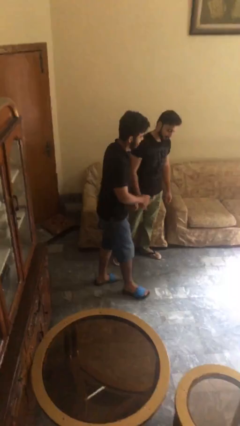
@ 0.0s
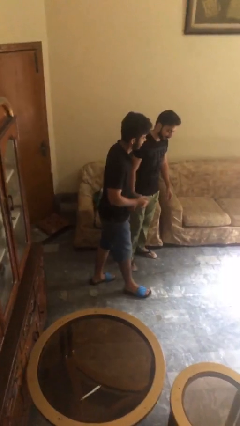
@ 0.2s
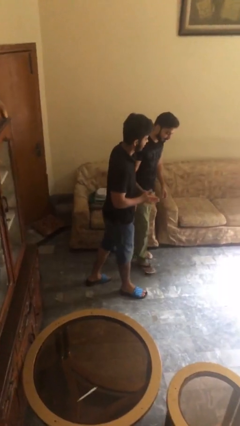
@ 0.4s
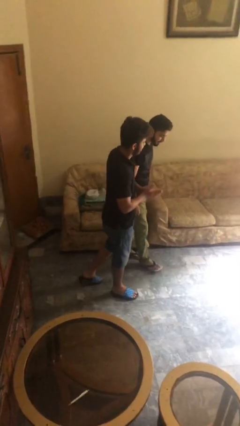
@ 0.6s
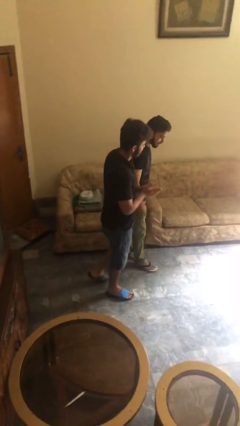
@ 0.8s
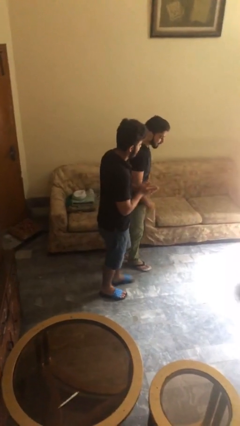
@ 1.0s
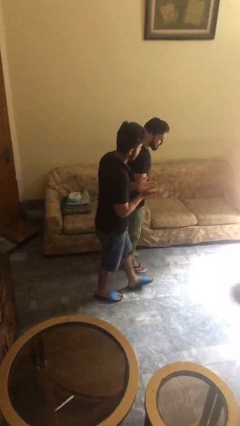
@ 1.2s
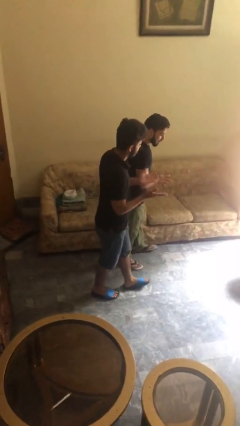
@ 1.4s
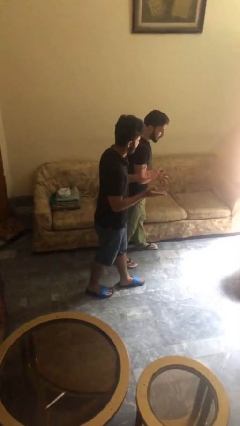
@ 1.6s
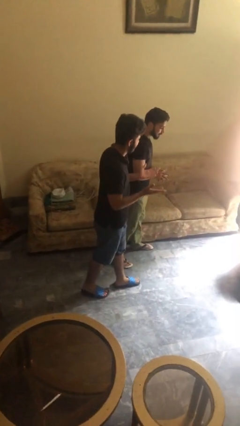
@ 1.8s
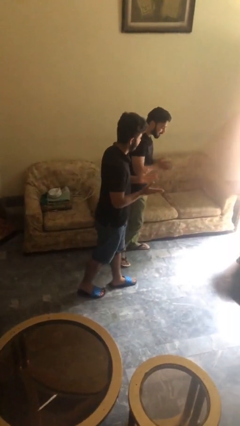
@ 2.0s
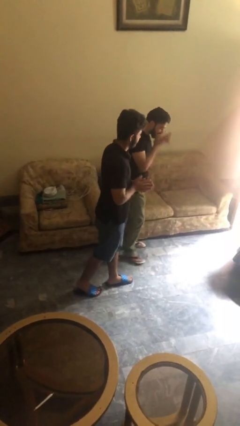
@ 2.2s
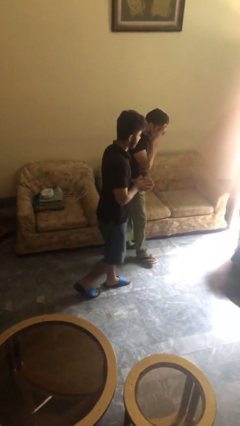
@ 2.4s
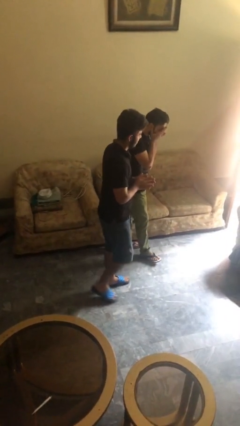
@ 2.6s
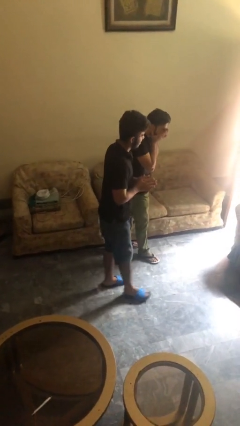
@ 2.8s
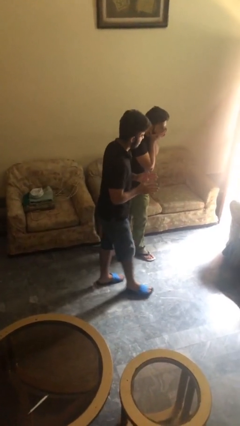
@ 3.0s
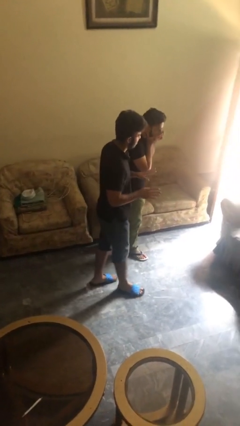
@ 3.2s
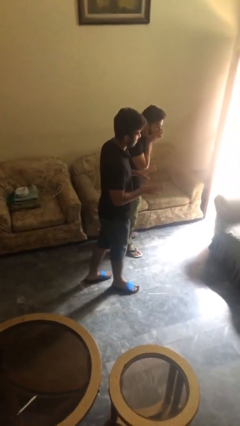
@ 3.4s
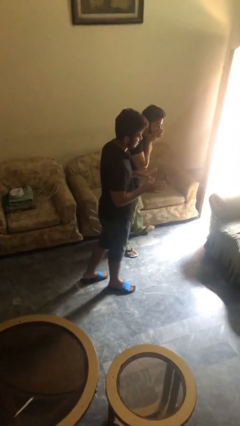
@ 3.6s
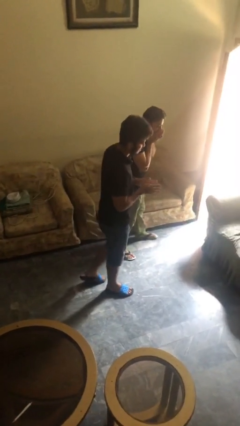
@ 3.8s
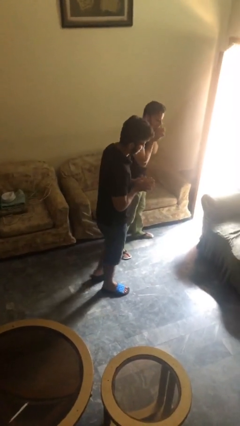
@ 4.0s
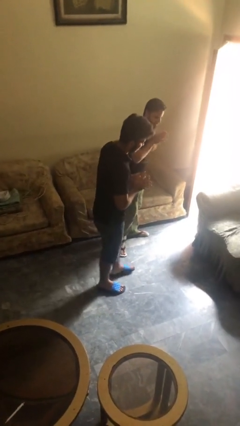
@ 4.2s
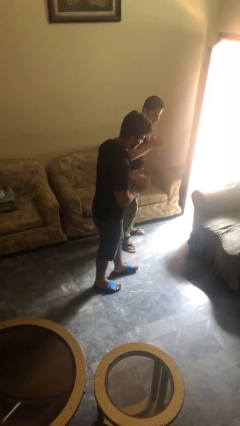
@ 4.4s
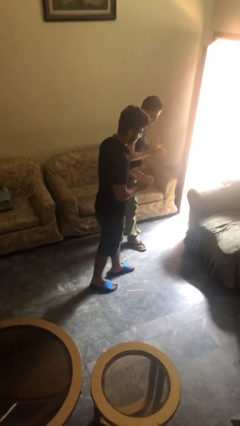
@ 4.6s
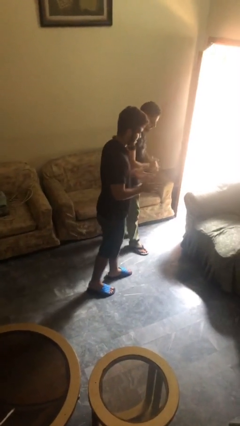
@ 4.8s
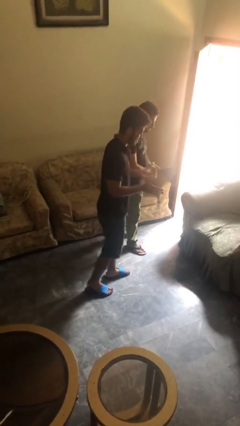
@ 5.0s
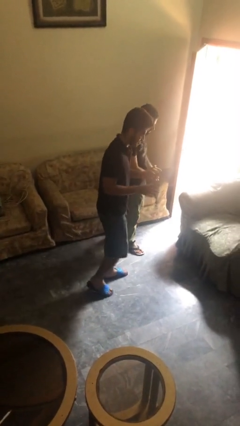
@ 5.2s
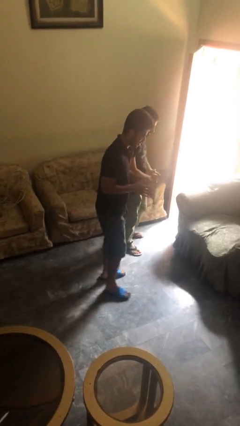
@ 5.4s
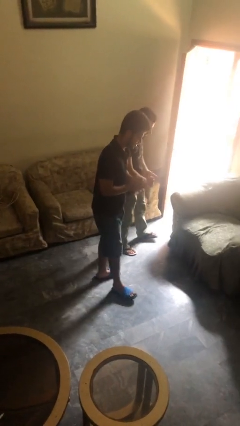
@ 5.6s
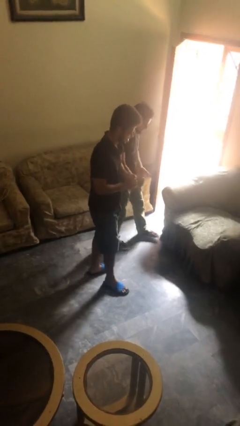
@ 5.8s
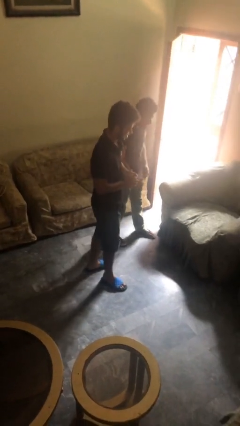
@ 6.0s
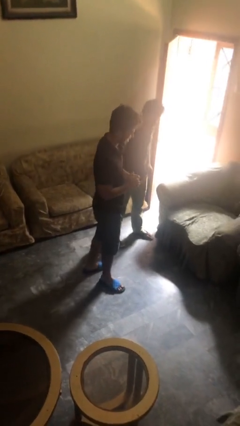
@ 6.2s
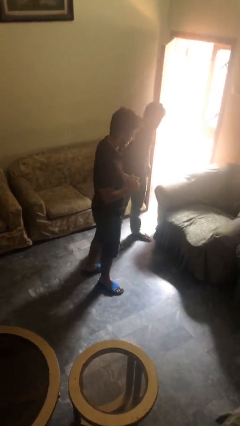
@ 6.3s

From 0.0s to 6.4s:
person talks to person

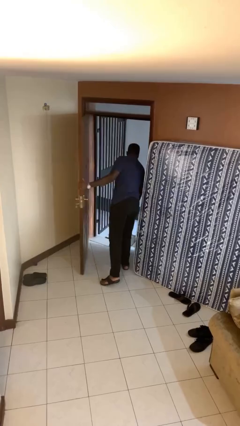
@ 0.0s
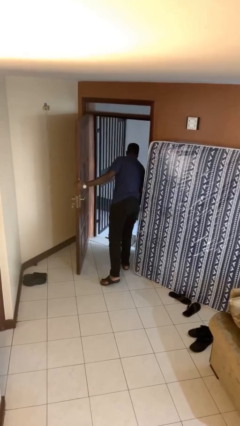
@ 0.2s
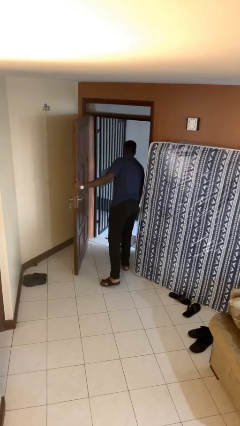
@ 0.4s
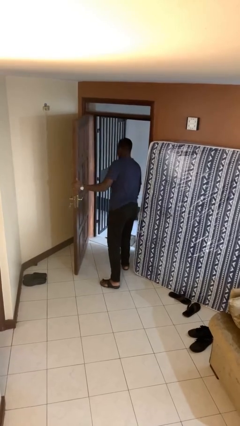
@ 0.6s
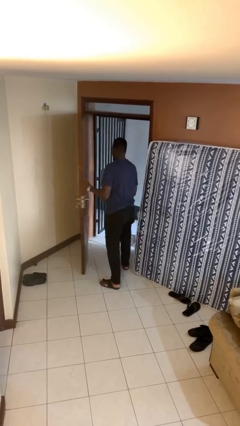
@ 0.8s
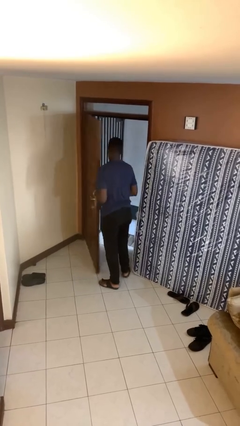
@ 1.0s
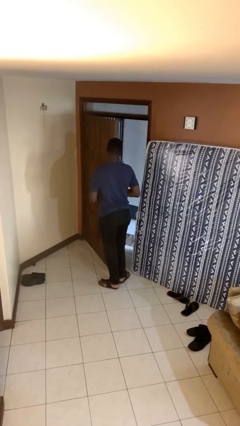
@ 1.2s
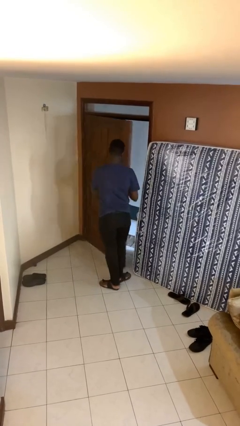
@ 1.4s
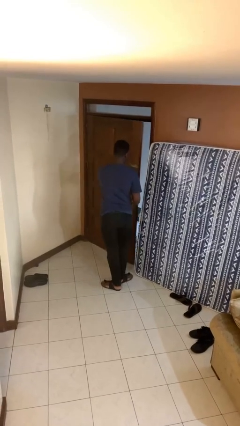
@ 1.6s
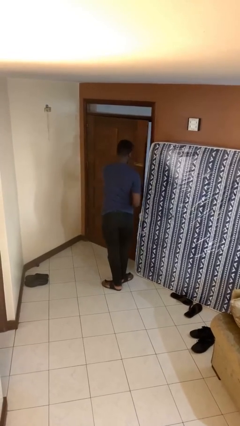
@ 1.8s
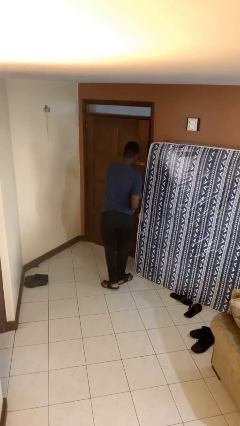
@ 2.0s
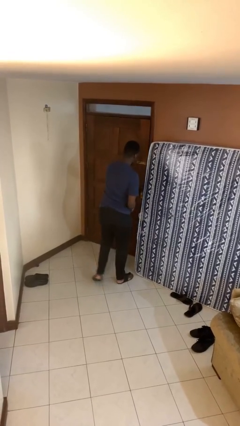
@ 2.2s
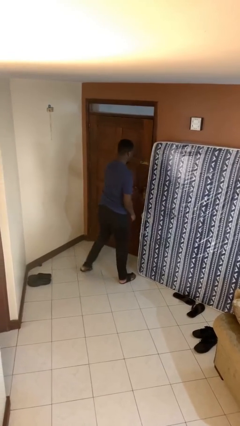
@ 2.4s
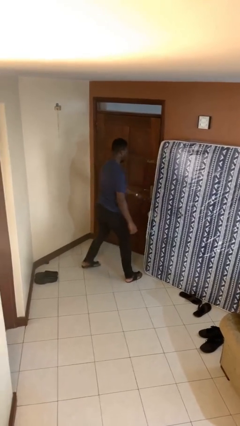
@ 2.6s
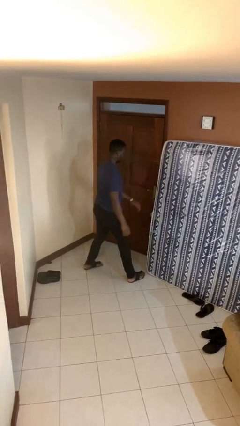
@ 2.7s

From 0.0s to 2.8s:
person closes facility door

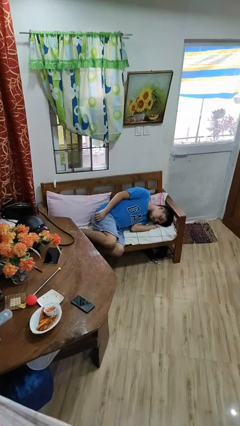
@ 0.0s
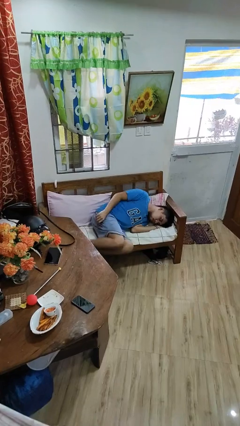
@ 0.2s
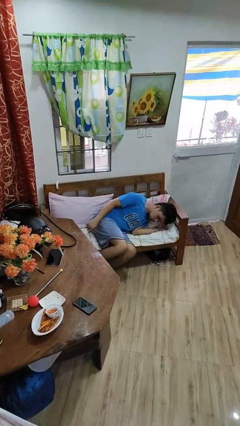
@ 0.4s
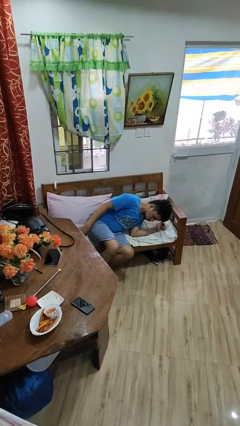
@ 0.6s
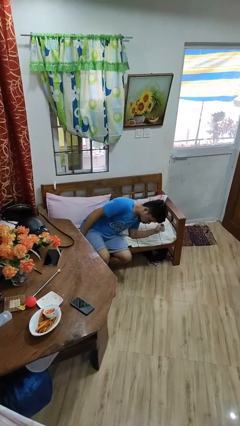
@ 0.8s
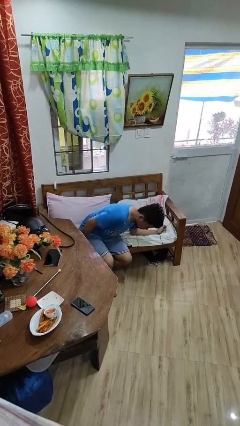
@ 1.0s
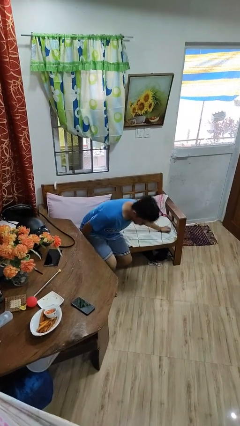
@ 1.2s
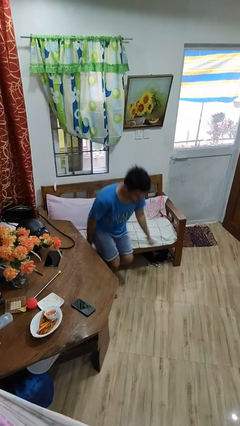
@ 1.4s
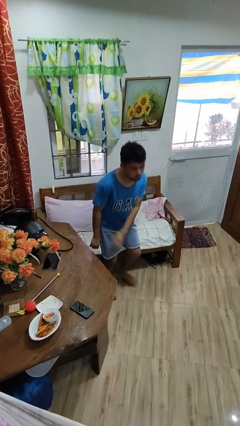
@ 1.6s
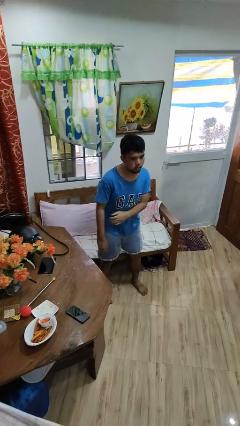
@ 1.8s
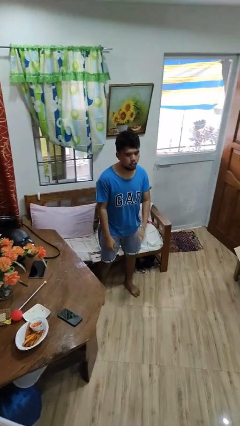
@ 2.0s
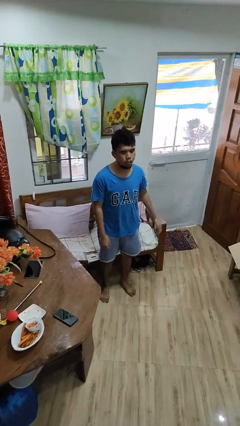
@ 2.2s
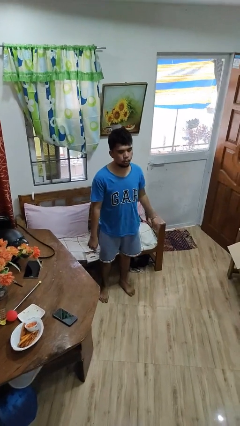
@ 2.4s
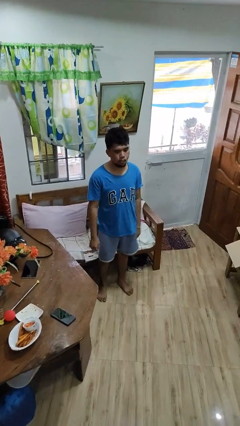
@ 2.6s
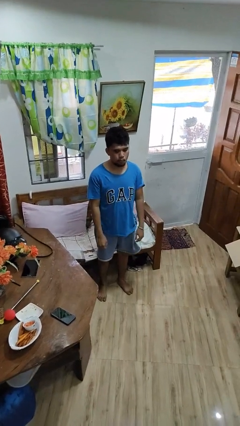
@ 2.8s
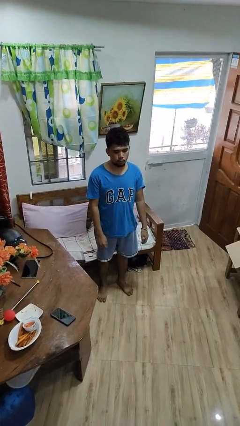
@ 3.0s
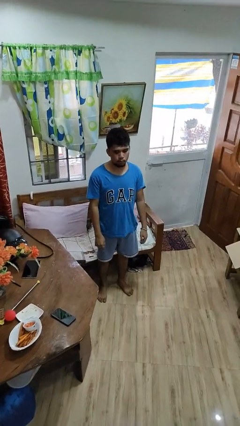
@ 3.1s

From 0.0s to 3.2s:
person stands up

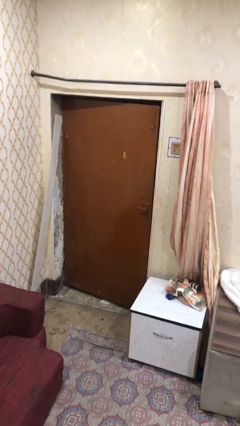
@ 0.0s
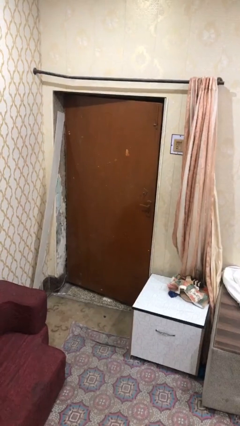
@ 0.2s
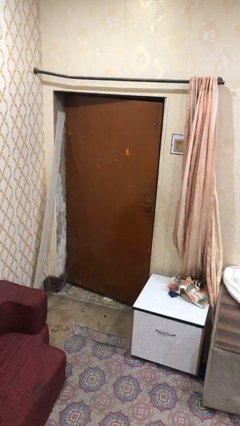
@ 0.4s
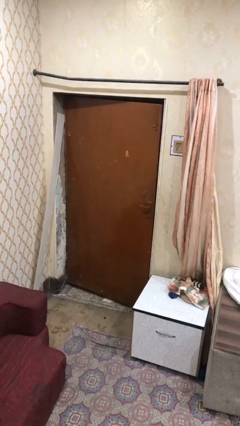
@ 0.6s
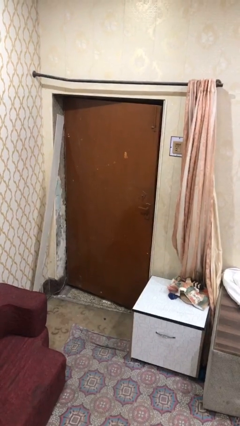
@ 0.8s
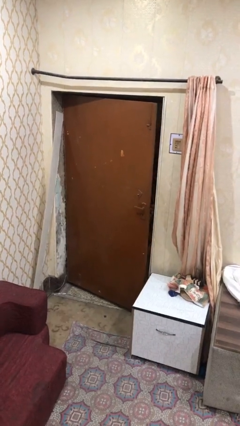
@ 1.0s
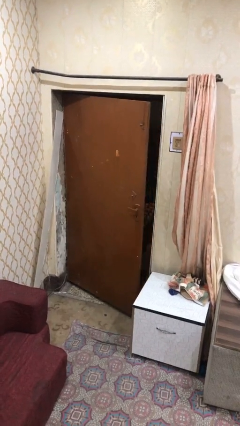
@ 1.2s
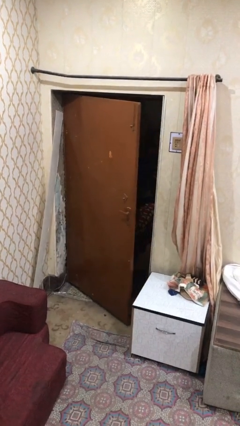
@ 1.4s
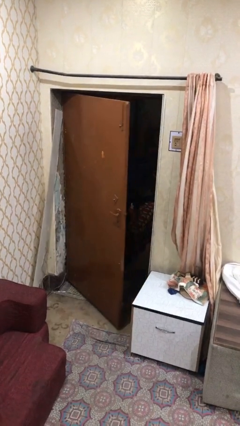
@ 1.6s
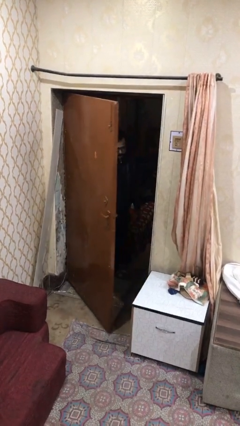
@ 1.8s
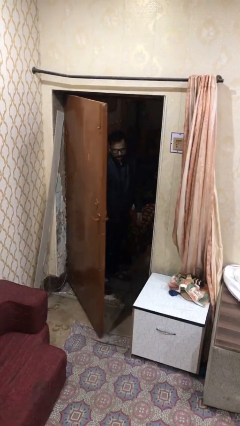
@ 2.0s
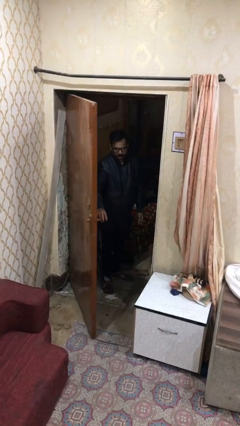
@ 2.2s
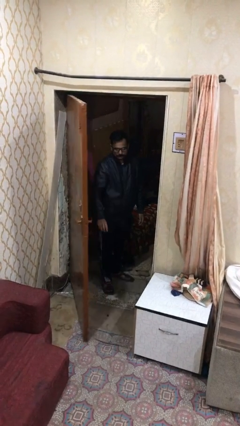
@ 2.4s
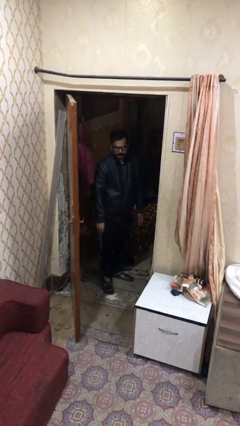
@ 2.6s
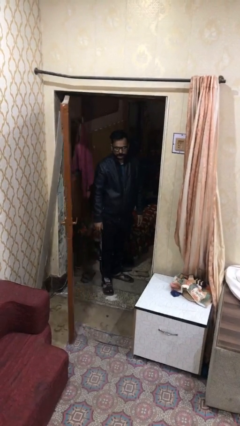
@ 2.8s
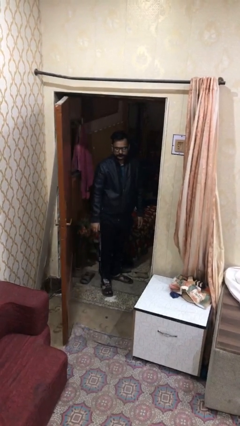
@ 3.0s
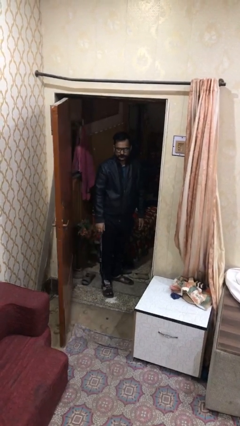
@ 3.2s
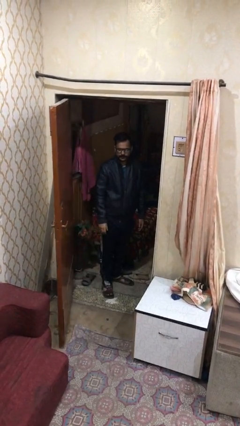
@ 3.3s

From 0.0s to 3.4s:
person opens facility door

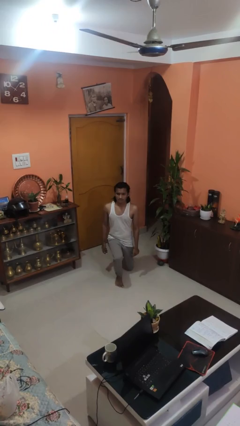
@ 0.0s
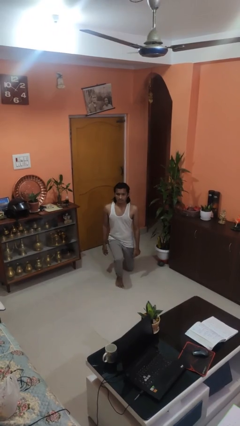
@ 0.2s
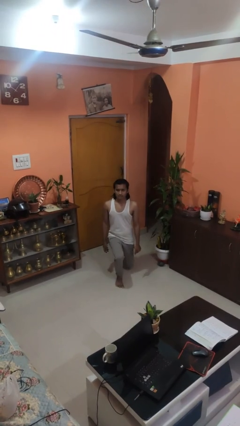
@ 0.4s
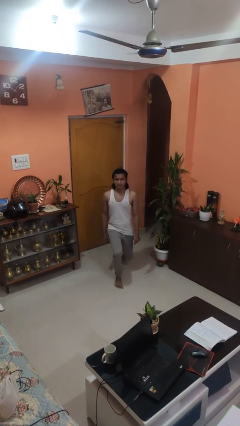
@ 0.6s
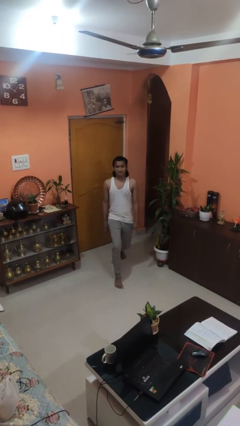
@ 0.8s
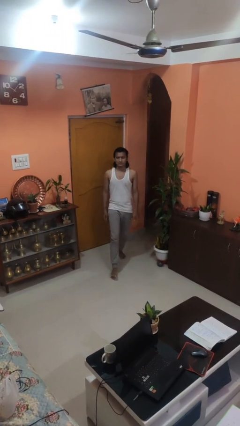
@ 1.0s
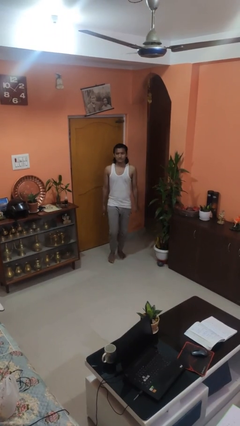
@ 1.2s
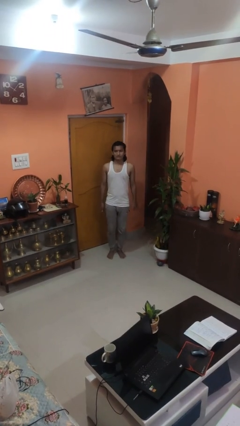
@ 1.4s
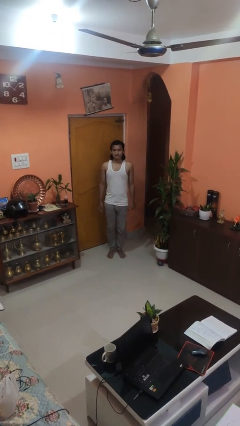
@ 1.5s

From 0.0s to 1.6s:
person stands up from floor

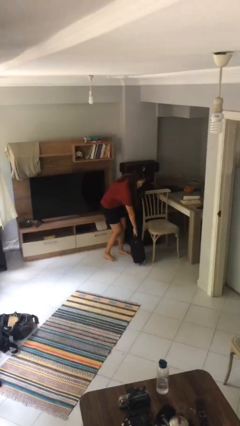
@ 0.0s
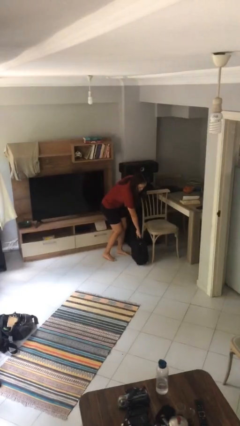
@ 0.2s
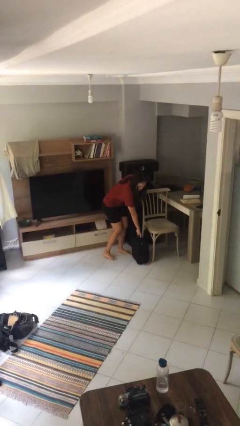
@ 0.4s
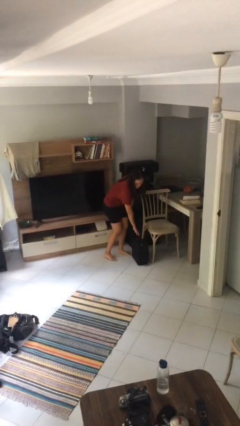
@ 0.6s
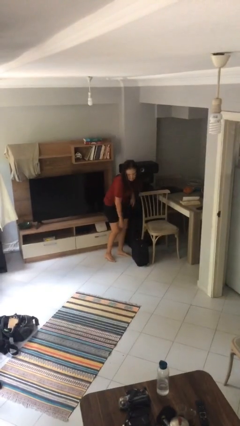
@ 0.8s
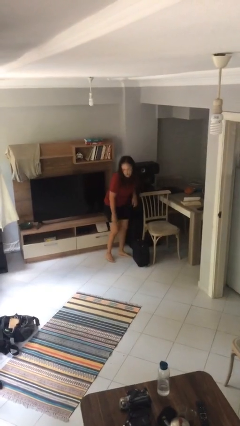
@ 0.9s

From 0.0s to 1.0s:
person puts down object on floor
